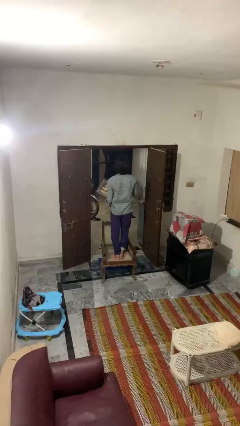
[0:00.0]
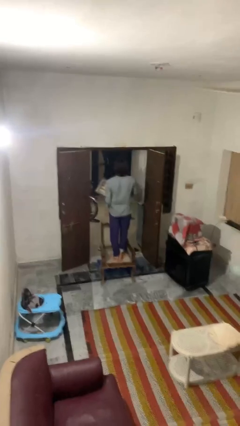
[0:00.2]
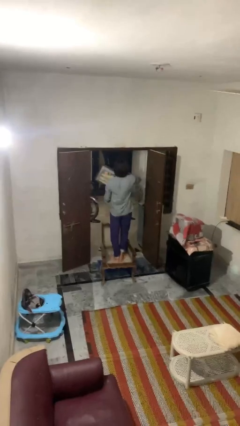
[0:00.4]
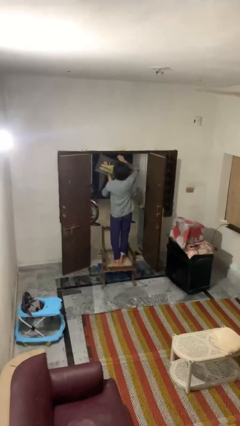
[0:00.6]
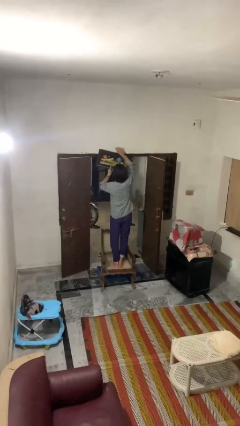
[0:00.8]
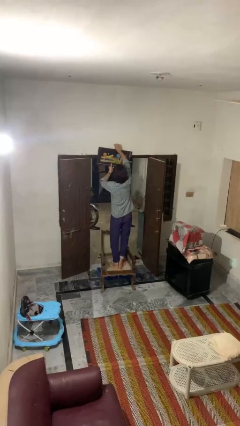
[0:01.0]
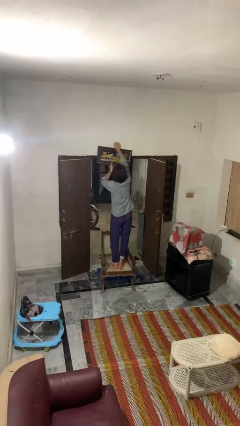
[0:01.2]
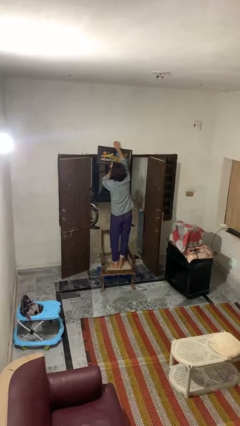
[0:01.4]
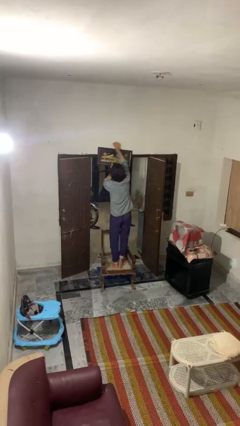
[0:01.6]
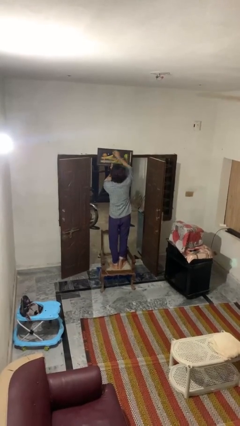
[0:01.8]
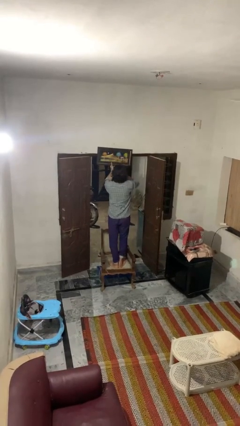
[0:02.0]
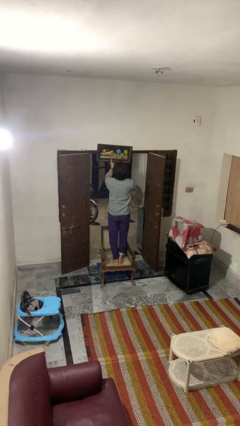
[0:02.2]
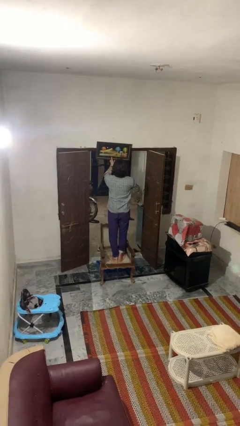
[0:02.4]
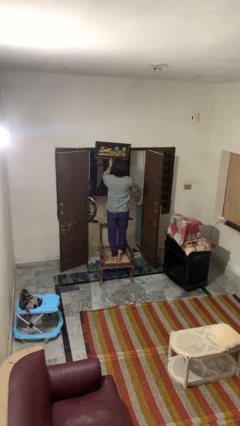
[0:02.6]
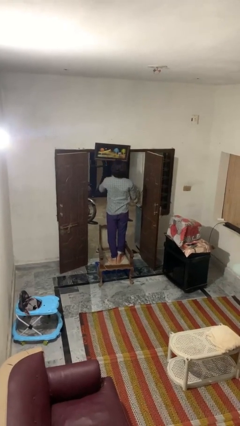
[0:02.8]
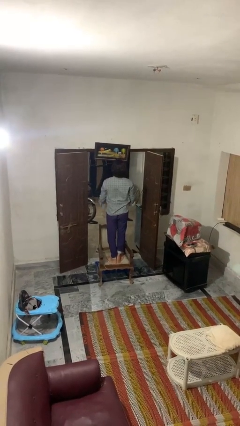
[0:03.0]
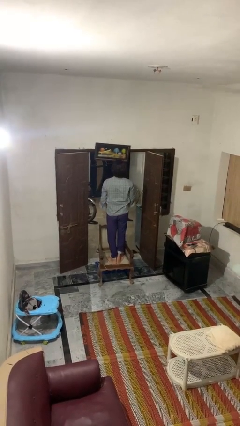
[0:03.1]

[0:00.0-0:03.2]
person puts up picture frame

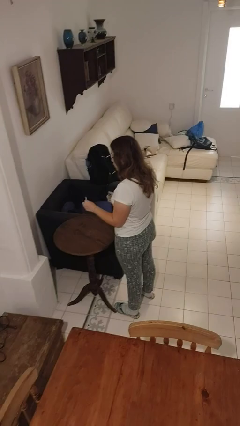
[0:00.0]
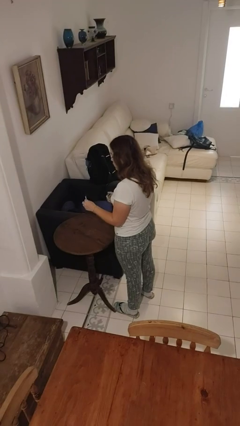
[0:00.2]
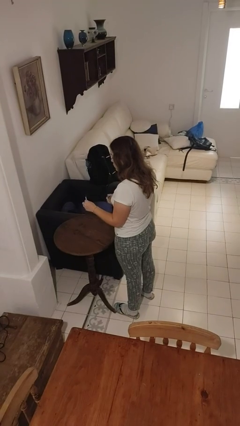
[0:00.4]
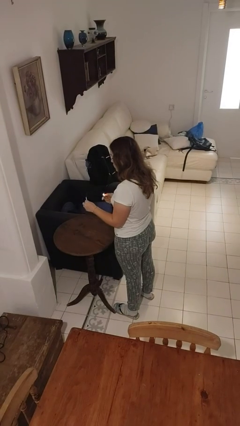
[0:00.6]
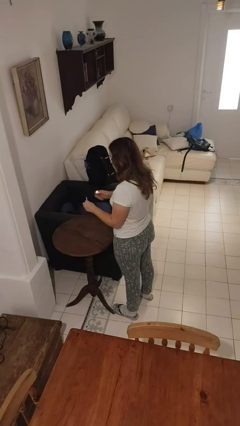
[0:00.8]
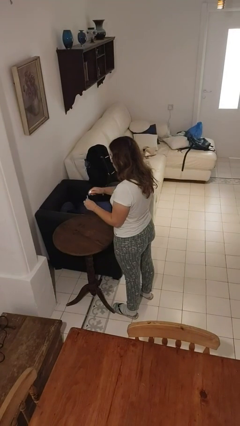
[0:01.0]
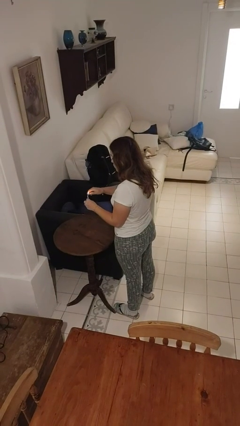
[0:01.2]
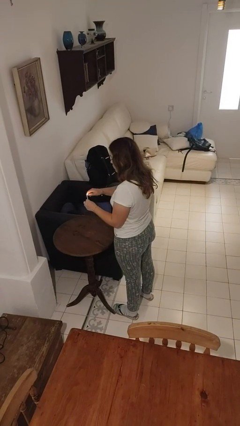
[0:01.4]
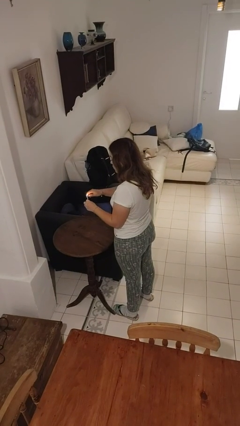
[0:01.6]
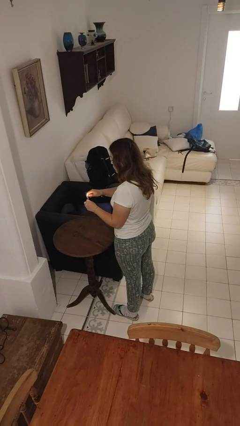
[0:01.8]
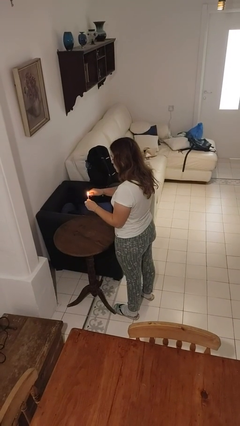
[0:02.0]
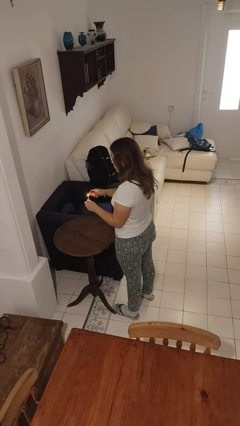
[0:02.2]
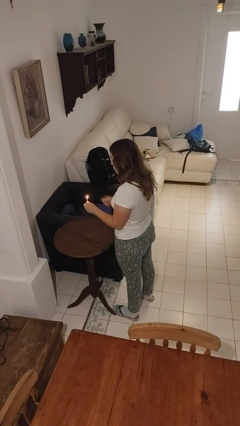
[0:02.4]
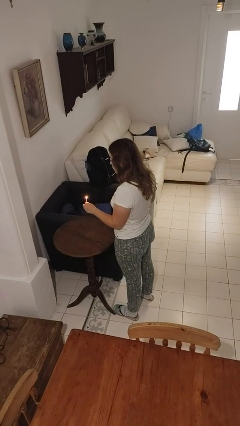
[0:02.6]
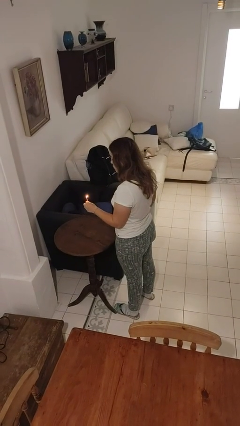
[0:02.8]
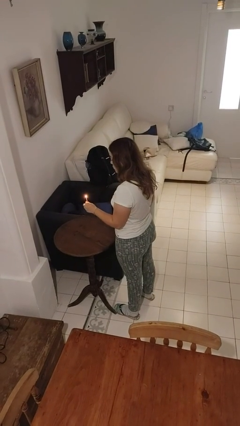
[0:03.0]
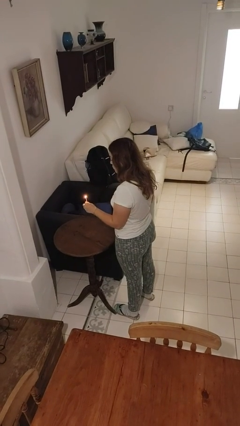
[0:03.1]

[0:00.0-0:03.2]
person lights candle

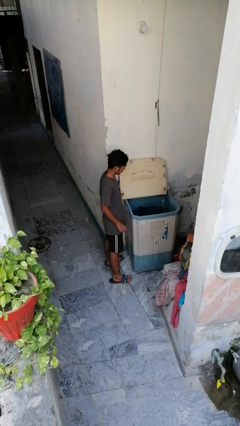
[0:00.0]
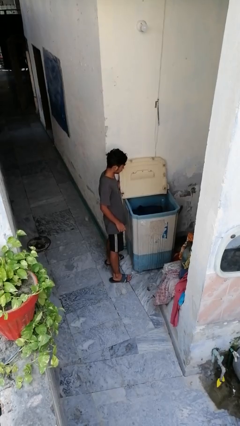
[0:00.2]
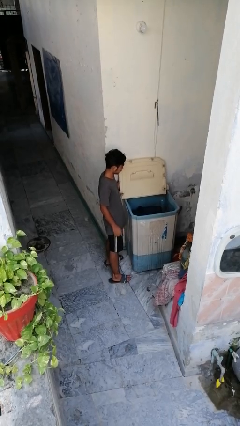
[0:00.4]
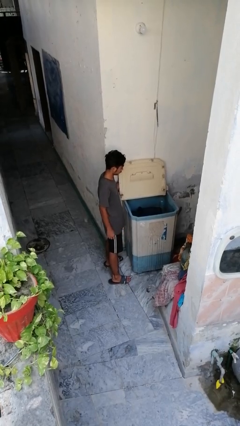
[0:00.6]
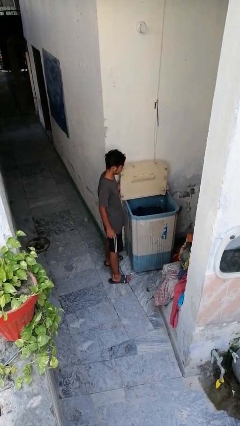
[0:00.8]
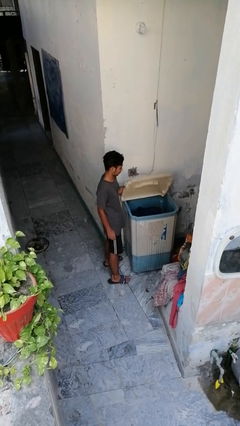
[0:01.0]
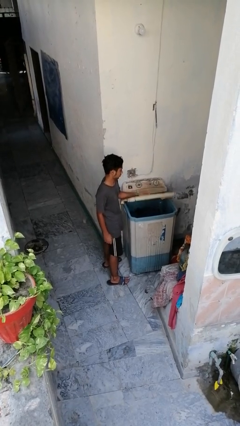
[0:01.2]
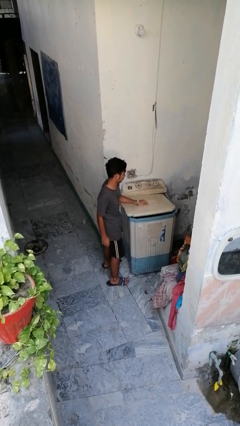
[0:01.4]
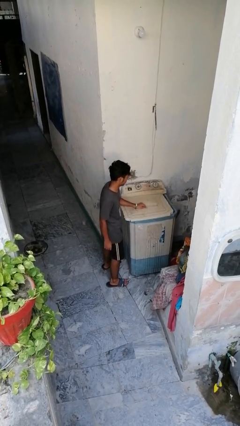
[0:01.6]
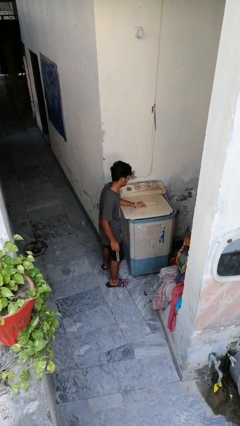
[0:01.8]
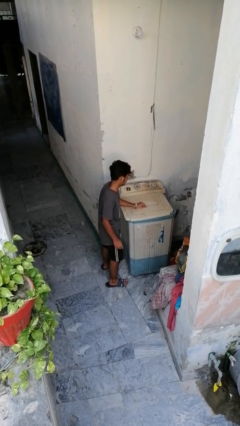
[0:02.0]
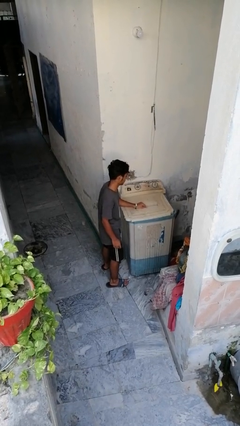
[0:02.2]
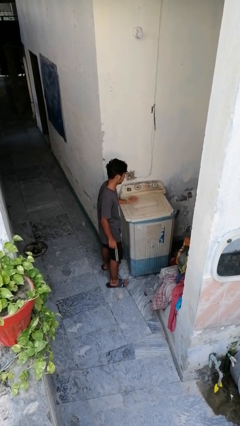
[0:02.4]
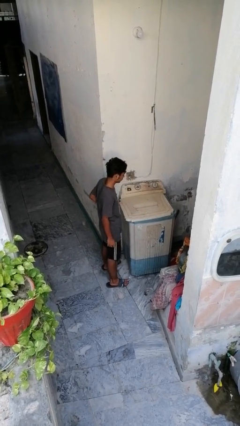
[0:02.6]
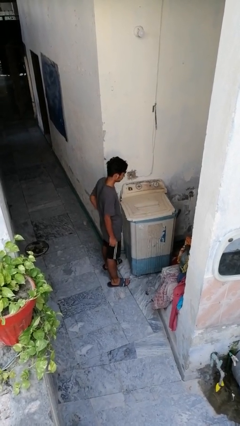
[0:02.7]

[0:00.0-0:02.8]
person closes clothes washer

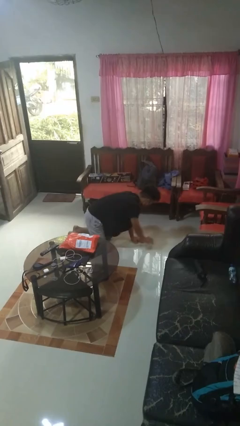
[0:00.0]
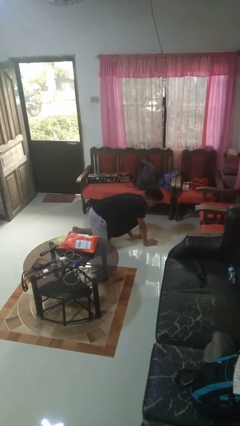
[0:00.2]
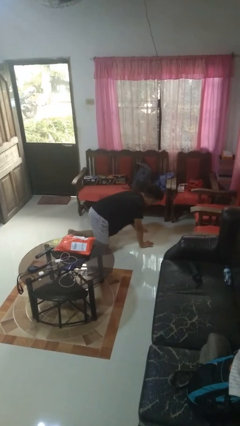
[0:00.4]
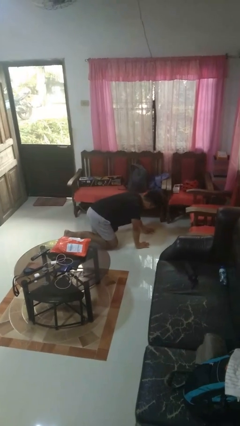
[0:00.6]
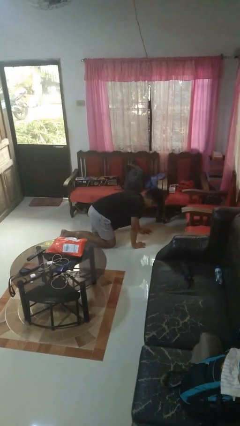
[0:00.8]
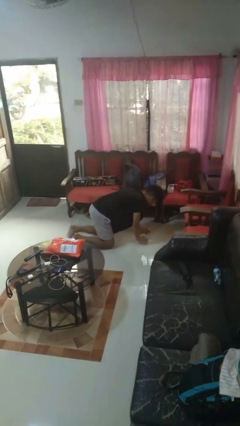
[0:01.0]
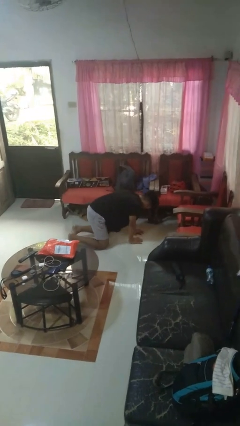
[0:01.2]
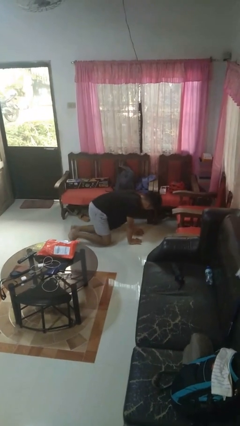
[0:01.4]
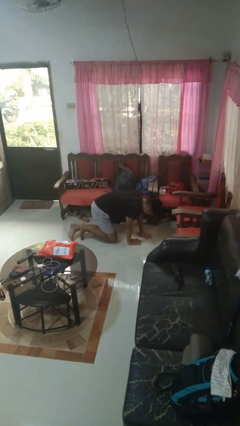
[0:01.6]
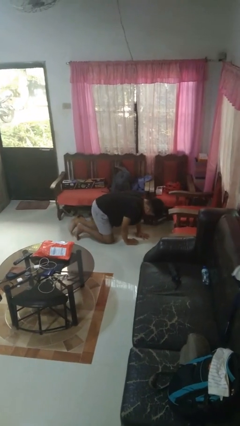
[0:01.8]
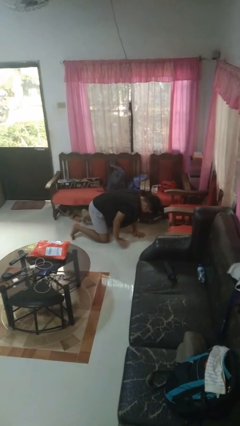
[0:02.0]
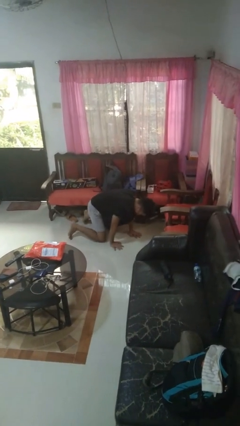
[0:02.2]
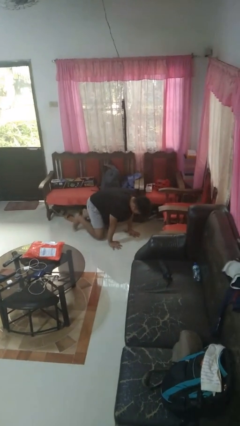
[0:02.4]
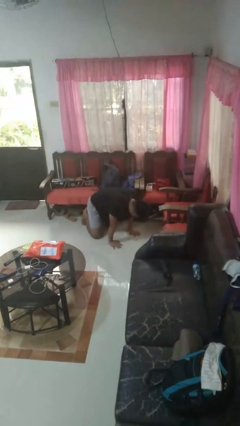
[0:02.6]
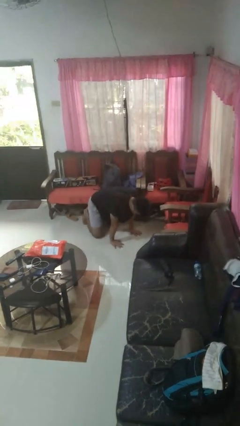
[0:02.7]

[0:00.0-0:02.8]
person crawls

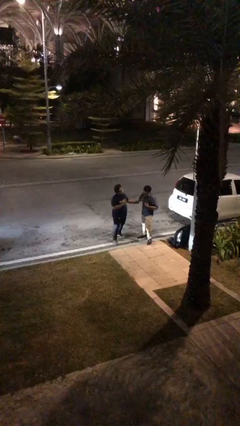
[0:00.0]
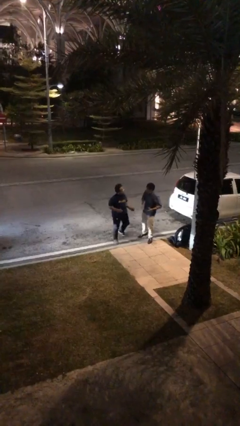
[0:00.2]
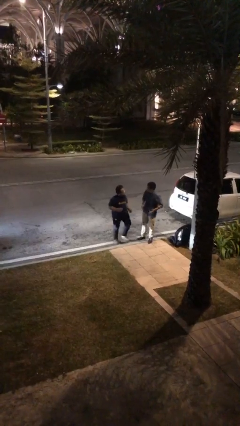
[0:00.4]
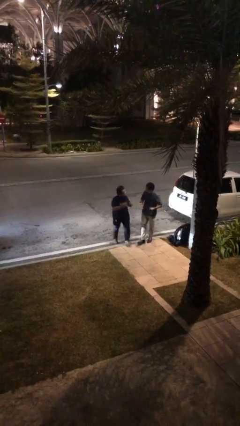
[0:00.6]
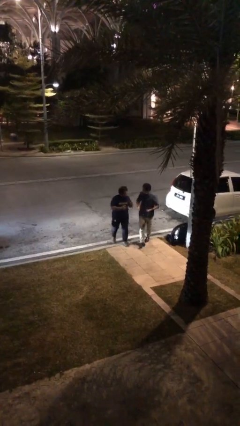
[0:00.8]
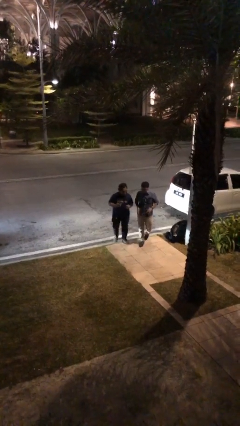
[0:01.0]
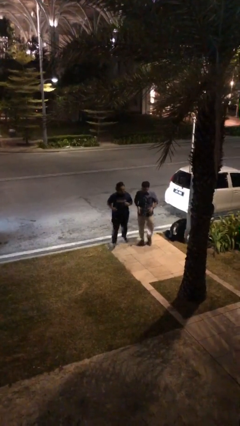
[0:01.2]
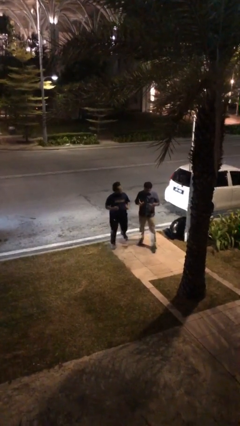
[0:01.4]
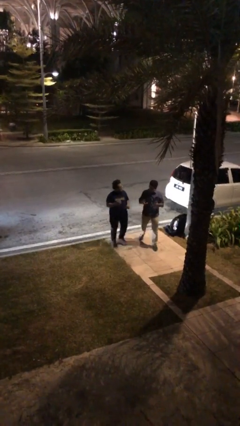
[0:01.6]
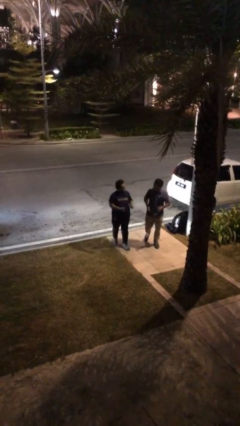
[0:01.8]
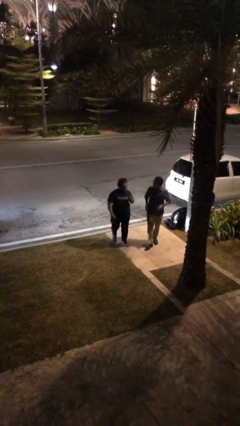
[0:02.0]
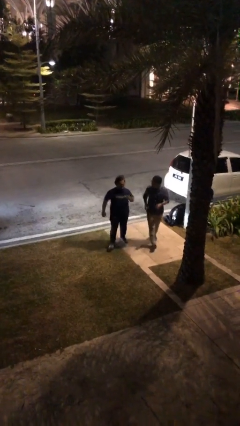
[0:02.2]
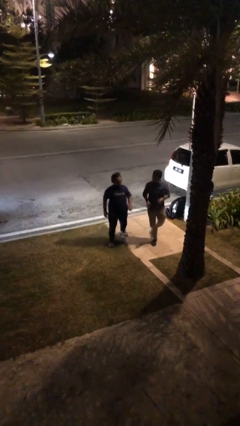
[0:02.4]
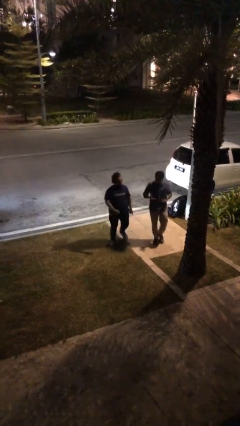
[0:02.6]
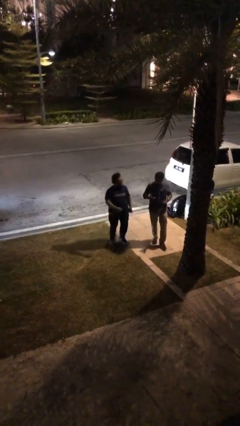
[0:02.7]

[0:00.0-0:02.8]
person talks to person

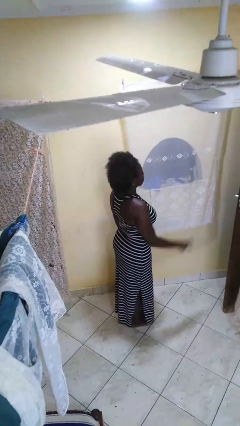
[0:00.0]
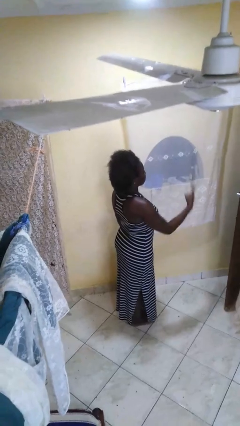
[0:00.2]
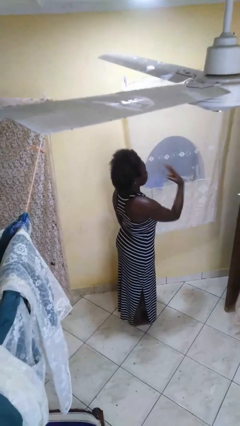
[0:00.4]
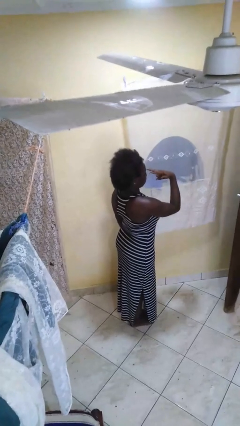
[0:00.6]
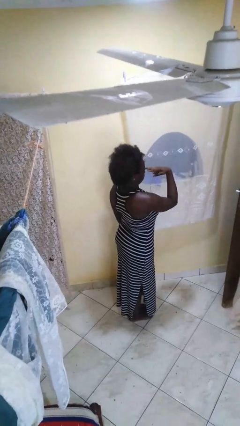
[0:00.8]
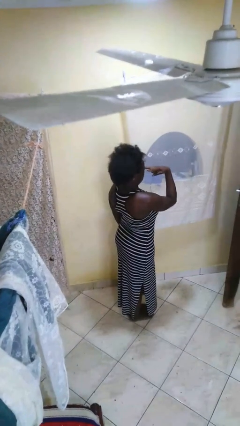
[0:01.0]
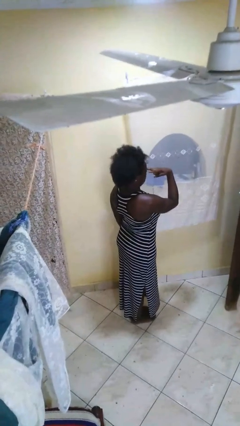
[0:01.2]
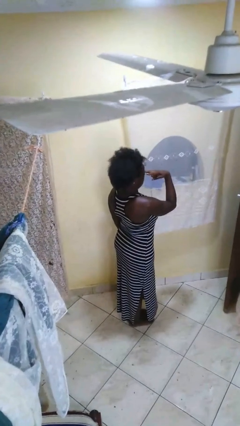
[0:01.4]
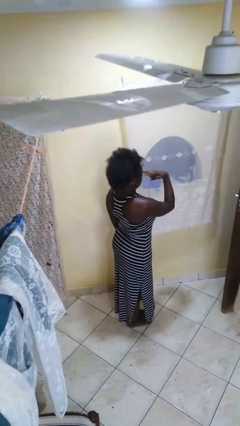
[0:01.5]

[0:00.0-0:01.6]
person gestures watch closely

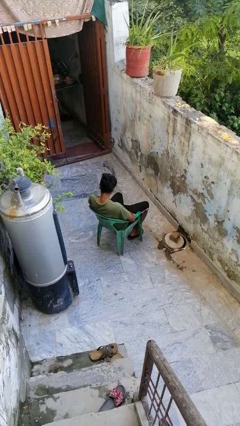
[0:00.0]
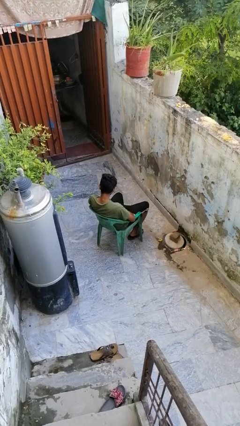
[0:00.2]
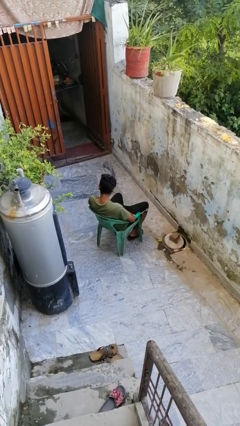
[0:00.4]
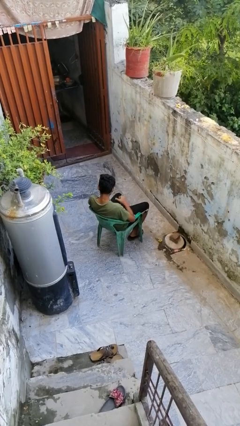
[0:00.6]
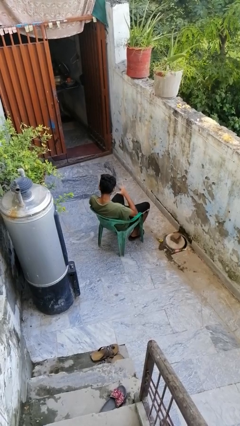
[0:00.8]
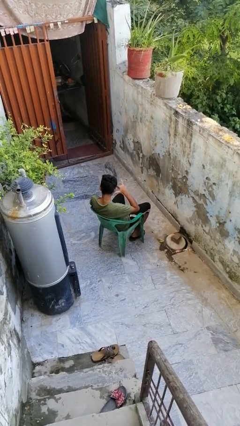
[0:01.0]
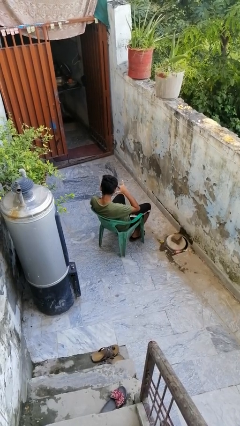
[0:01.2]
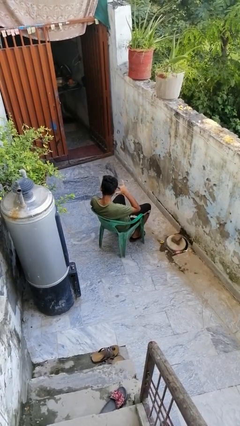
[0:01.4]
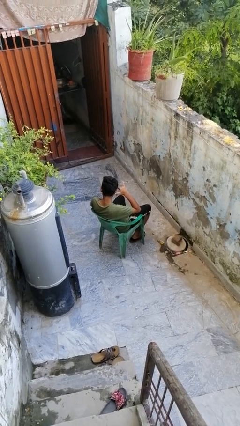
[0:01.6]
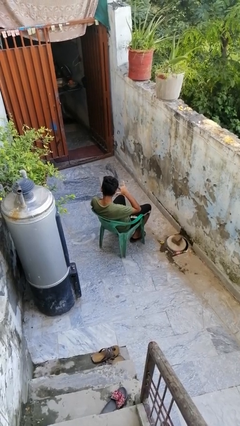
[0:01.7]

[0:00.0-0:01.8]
person gestures call me
